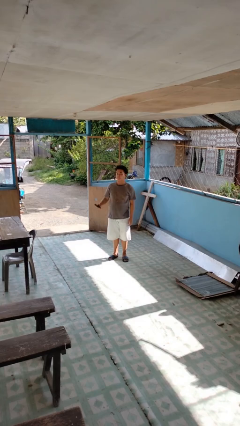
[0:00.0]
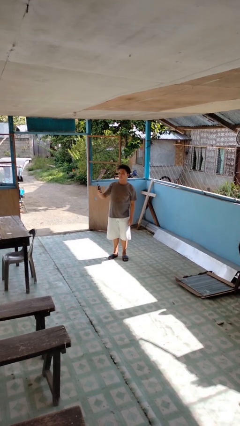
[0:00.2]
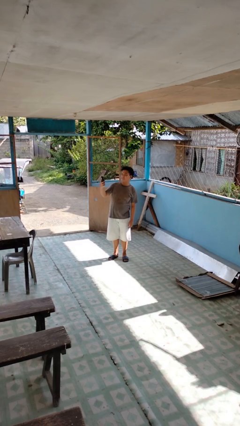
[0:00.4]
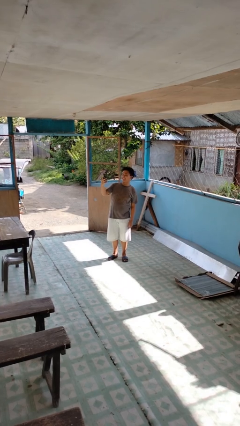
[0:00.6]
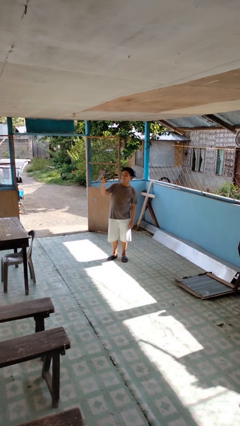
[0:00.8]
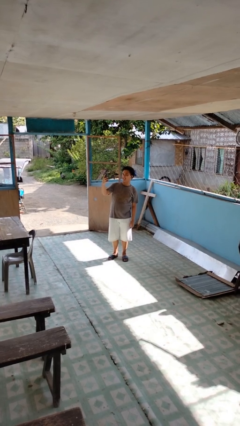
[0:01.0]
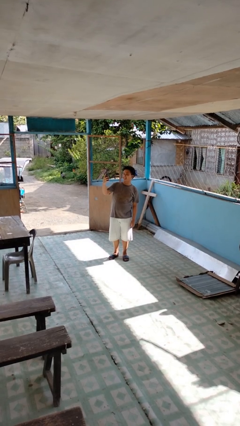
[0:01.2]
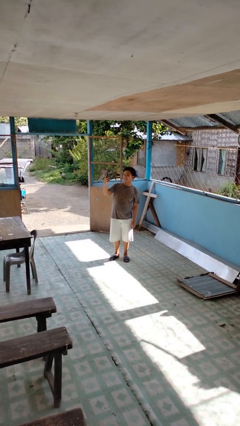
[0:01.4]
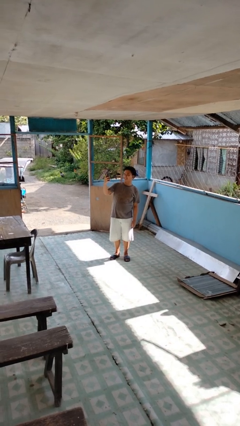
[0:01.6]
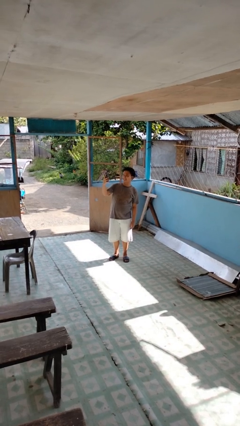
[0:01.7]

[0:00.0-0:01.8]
person takes selfie

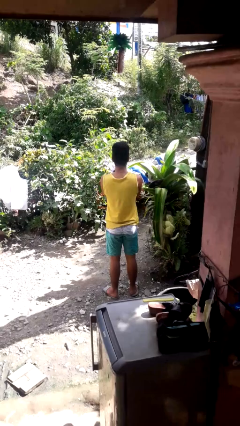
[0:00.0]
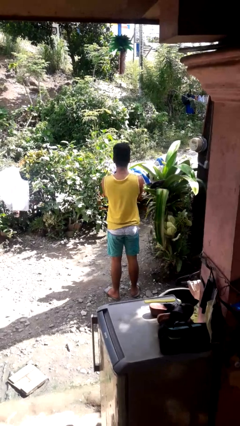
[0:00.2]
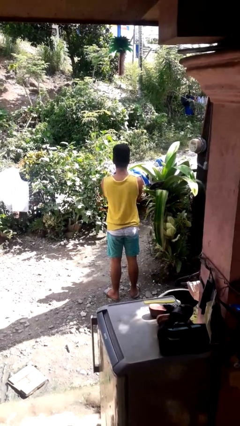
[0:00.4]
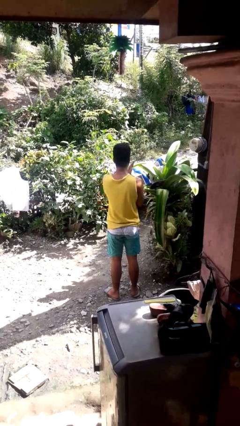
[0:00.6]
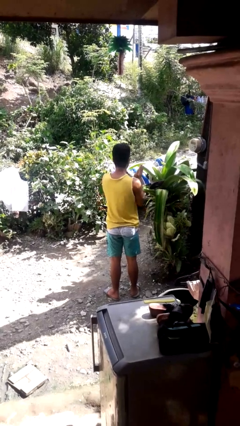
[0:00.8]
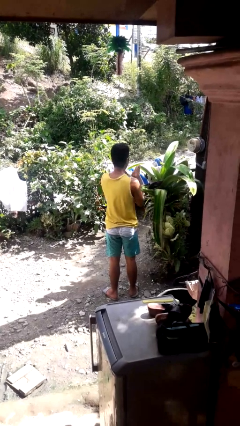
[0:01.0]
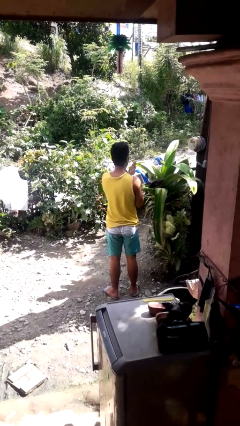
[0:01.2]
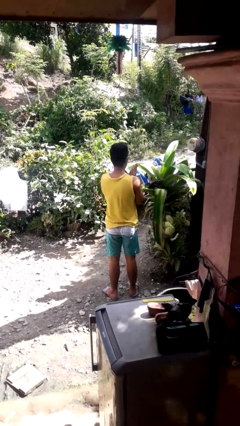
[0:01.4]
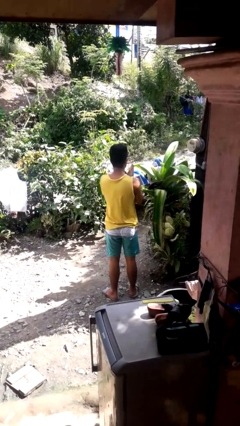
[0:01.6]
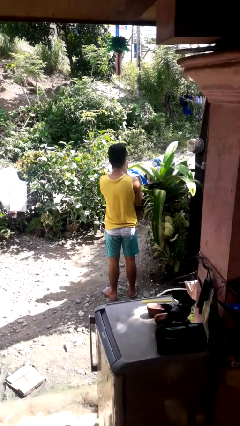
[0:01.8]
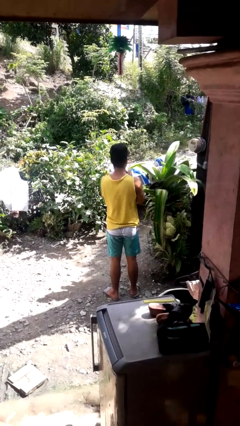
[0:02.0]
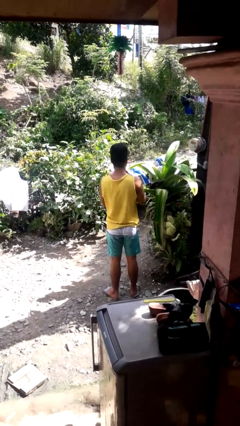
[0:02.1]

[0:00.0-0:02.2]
person blows into hands

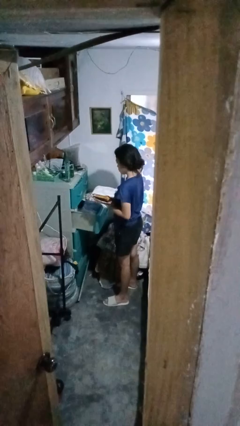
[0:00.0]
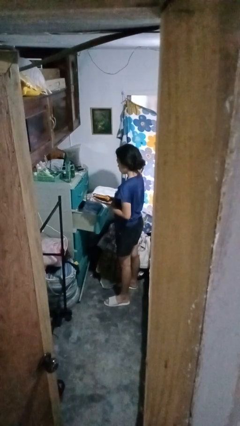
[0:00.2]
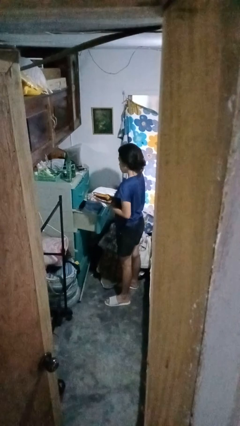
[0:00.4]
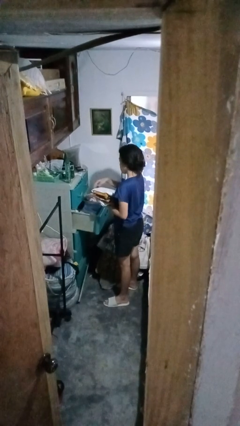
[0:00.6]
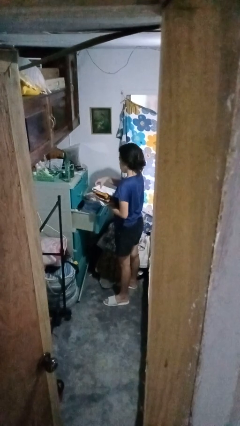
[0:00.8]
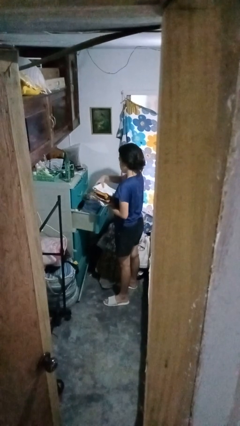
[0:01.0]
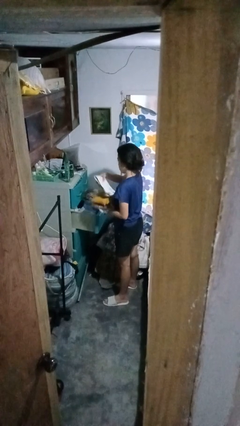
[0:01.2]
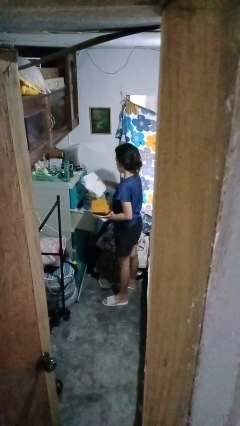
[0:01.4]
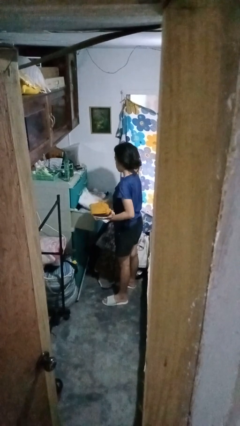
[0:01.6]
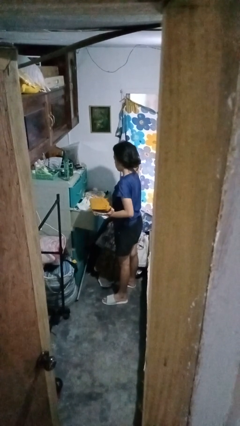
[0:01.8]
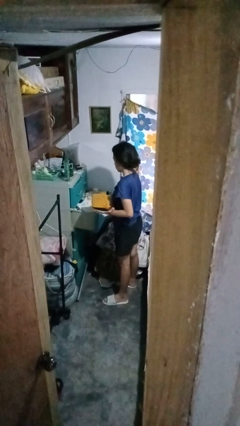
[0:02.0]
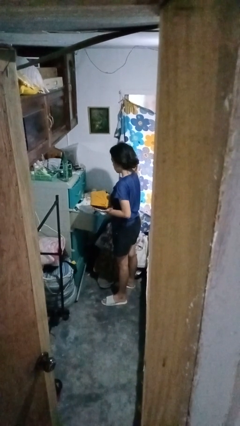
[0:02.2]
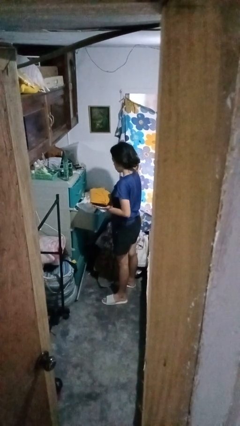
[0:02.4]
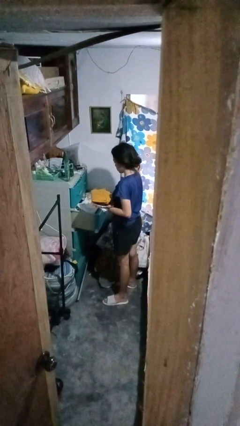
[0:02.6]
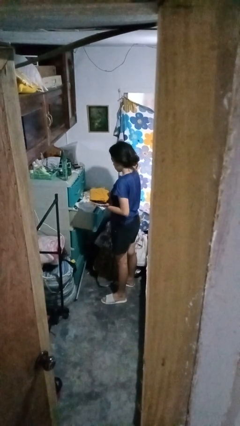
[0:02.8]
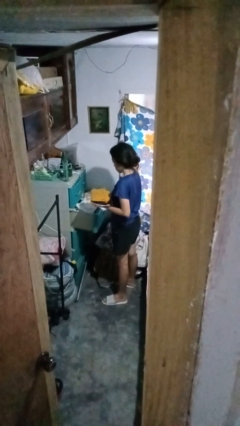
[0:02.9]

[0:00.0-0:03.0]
person puts clothes into dresser

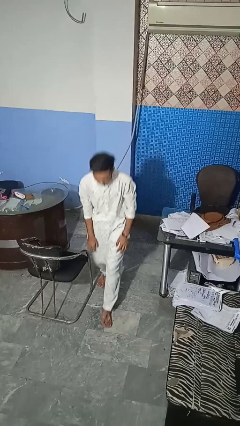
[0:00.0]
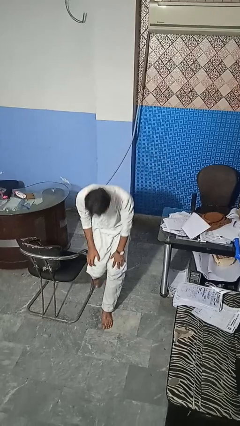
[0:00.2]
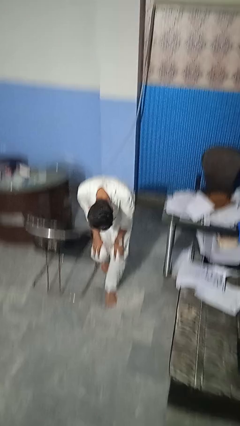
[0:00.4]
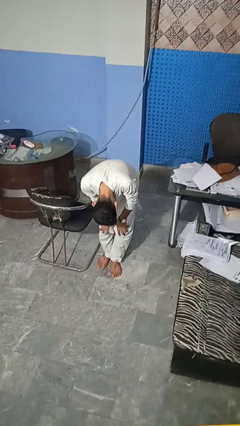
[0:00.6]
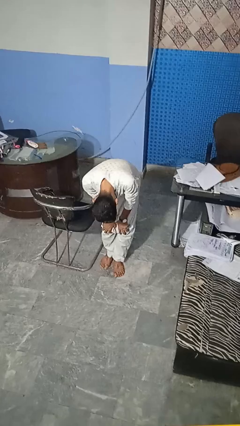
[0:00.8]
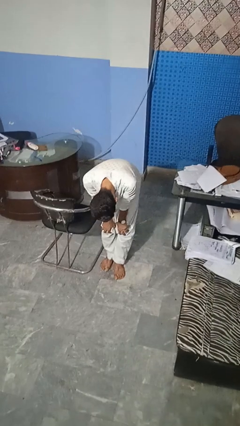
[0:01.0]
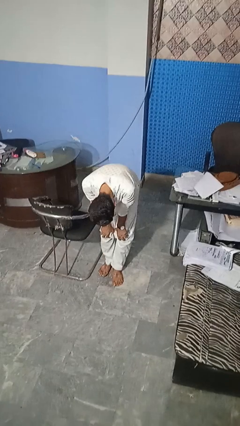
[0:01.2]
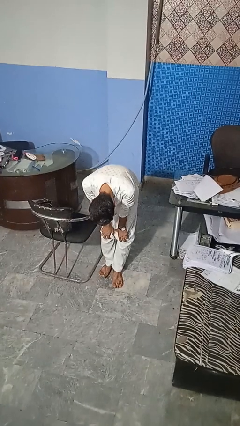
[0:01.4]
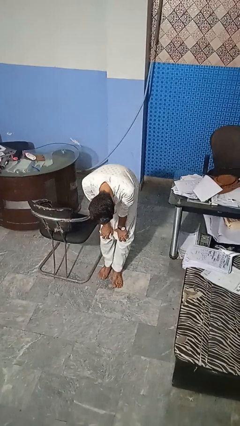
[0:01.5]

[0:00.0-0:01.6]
person stubs toe

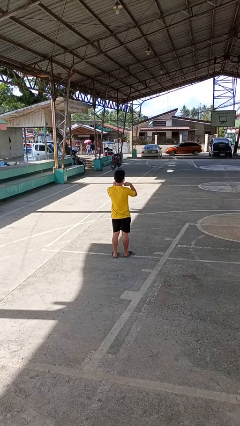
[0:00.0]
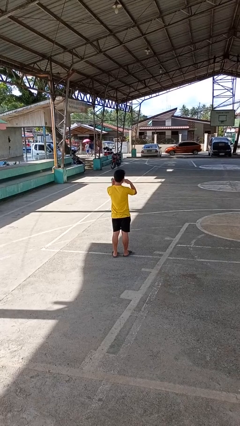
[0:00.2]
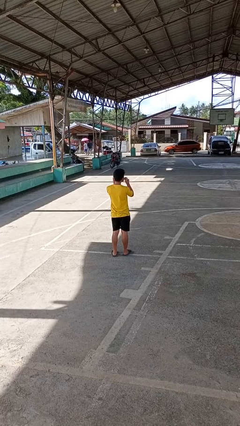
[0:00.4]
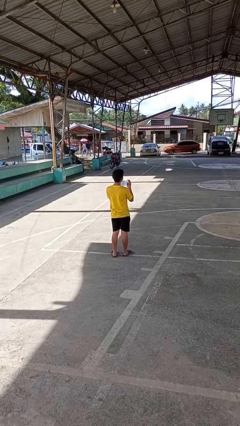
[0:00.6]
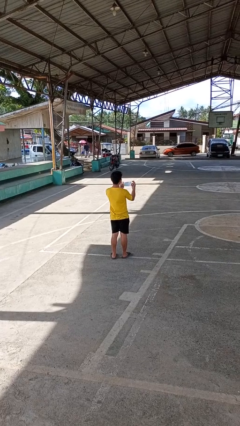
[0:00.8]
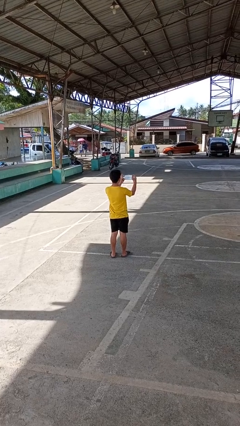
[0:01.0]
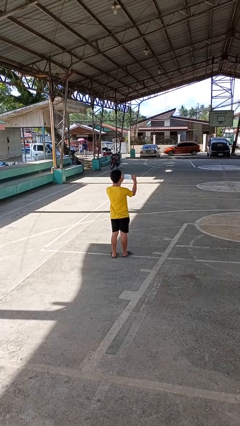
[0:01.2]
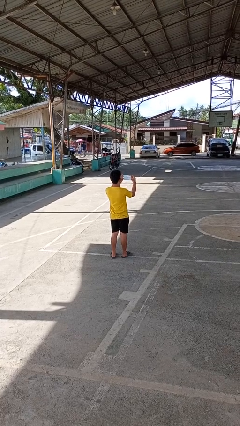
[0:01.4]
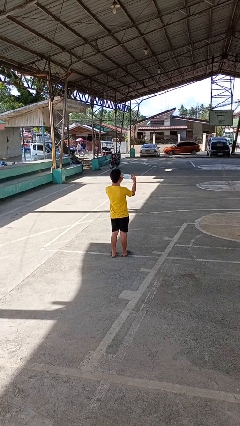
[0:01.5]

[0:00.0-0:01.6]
person takes off facemask

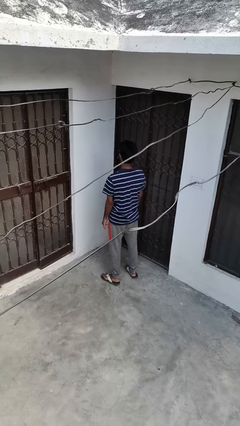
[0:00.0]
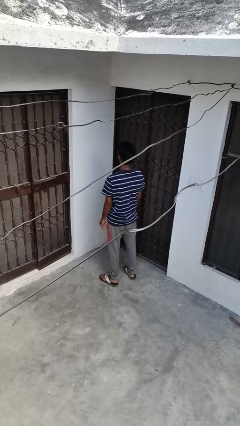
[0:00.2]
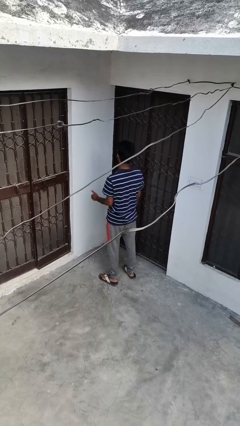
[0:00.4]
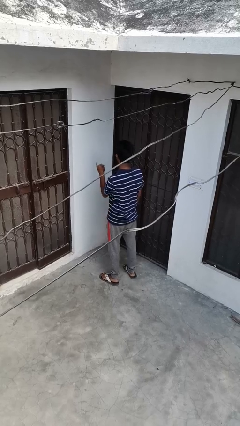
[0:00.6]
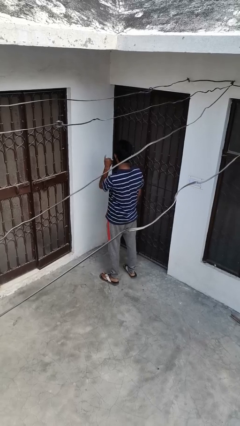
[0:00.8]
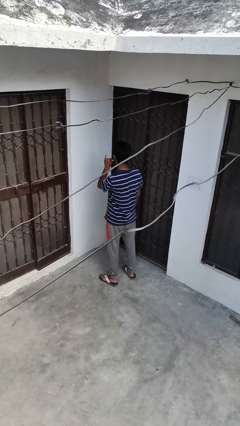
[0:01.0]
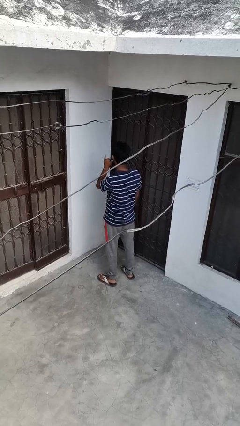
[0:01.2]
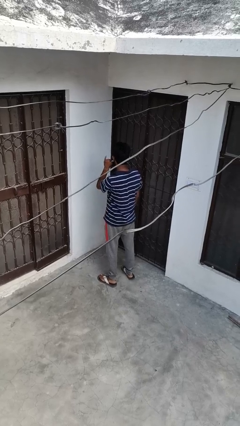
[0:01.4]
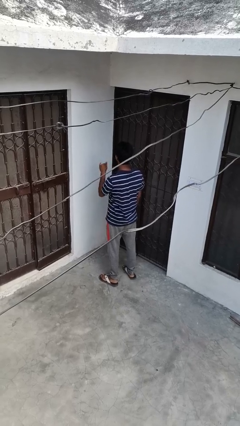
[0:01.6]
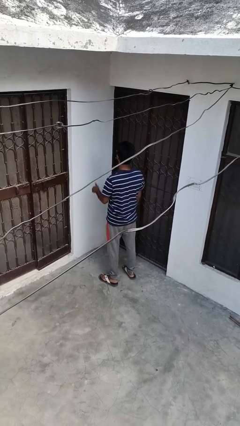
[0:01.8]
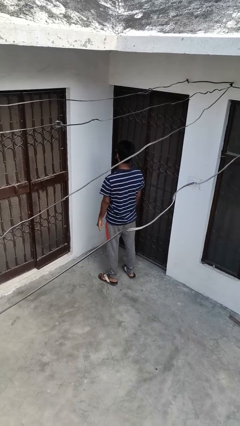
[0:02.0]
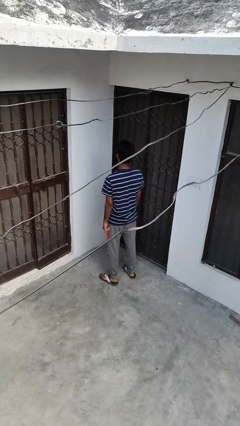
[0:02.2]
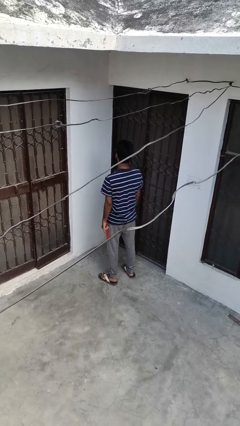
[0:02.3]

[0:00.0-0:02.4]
person gestures call me

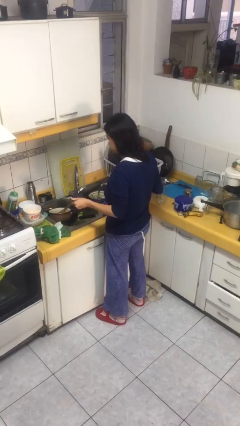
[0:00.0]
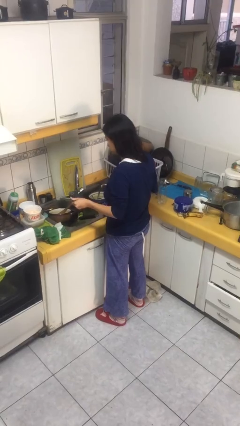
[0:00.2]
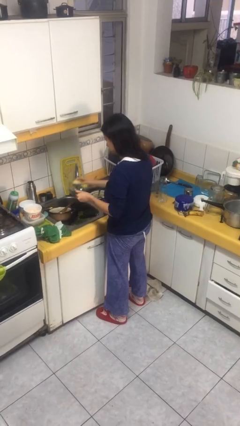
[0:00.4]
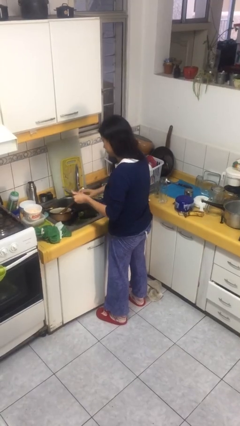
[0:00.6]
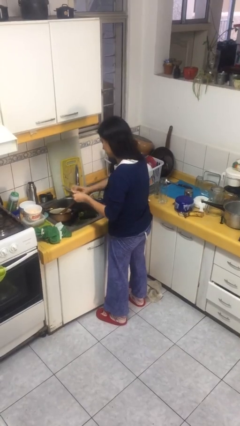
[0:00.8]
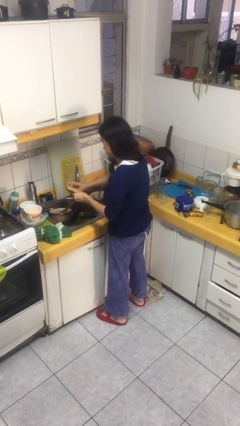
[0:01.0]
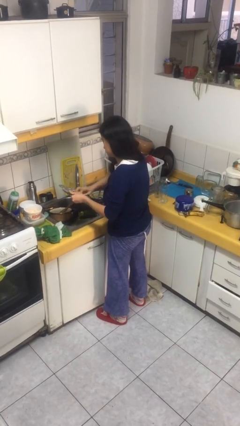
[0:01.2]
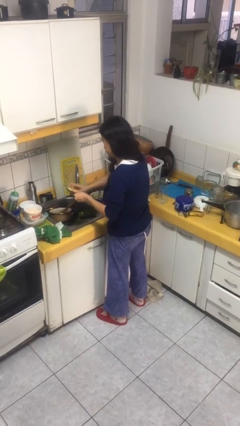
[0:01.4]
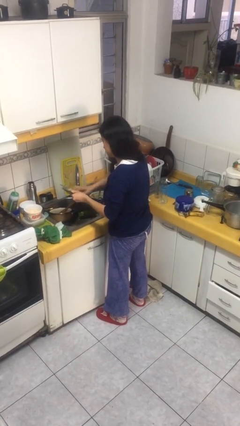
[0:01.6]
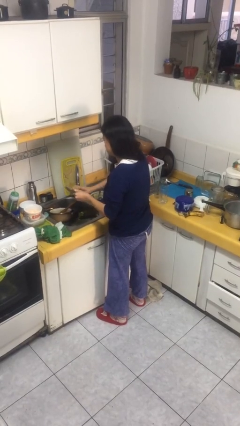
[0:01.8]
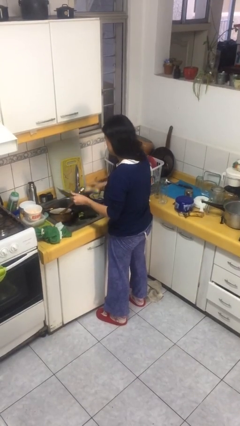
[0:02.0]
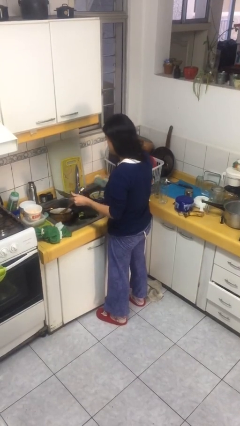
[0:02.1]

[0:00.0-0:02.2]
person washes dish

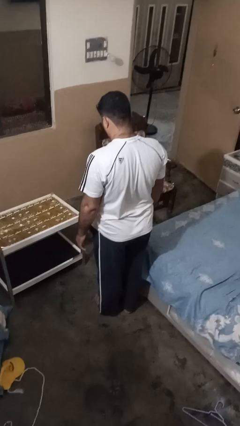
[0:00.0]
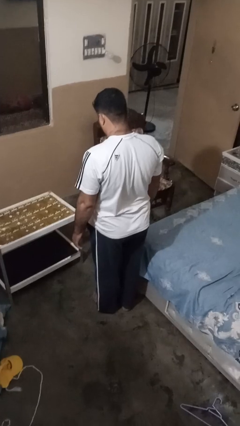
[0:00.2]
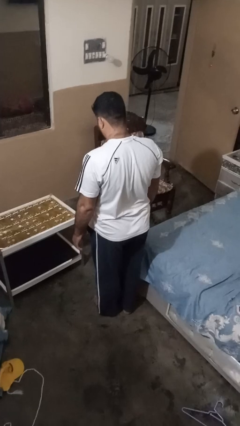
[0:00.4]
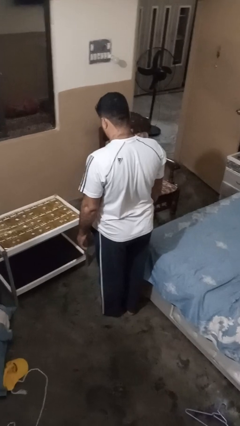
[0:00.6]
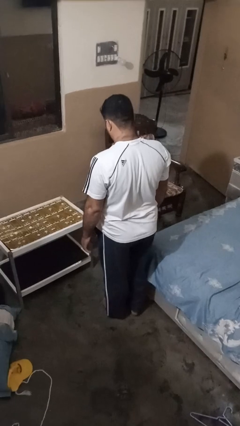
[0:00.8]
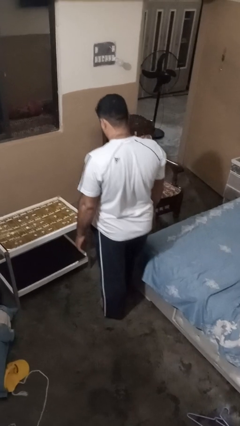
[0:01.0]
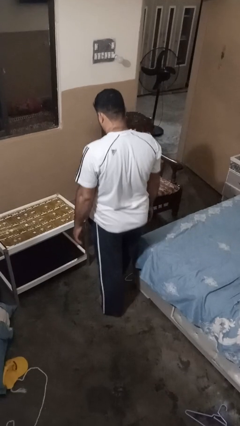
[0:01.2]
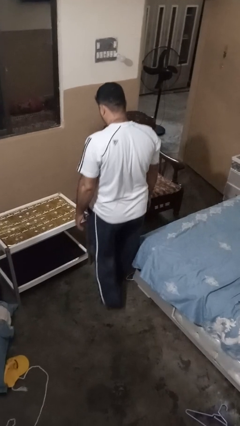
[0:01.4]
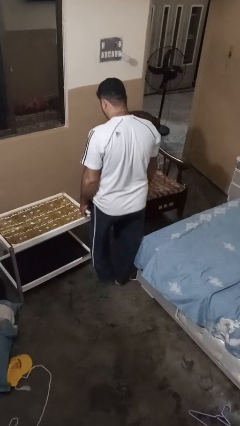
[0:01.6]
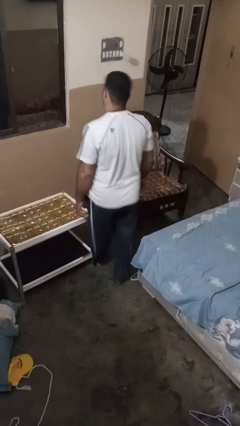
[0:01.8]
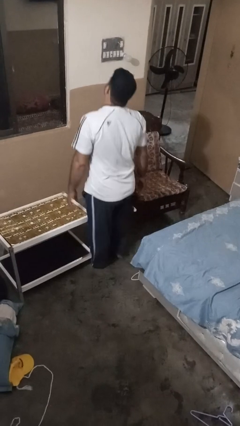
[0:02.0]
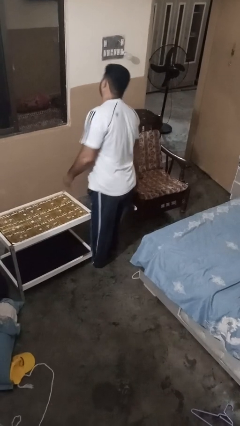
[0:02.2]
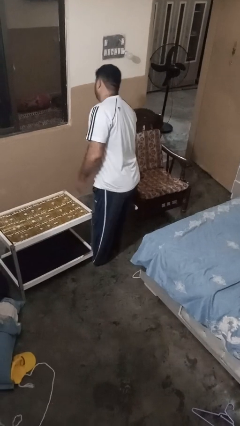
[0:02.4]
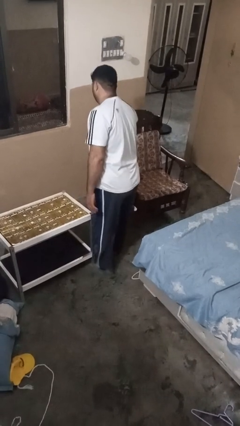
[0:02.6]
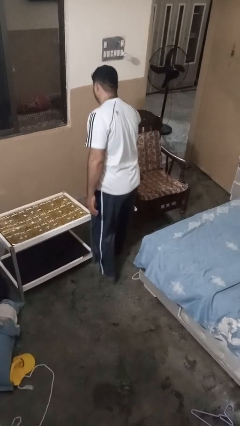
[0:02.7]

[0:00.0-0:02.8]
person bumps into table
